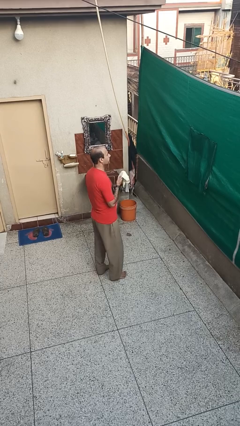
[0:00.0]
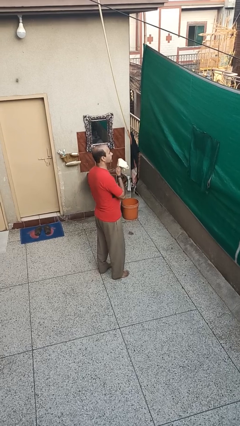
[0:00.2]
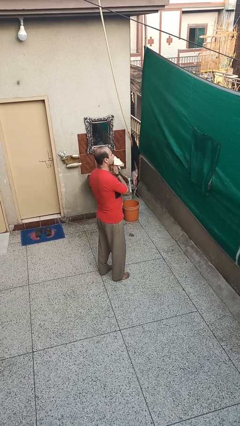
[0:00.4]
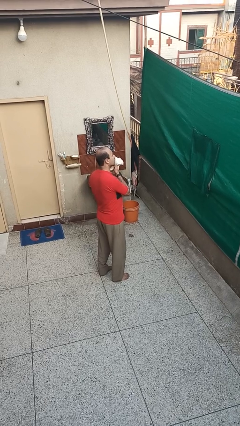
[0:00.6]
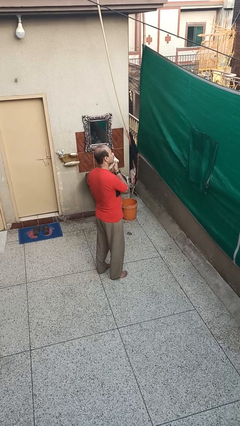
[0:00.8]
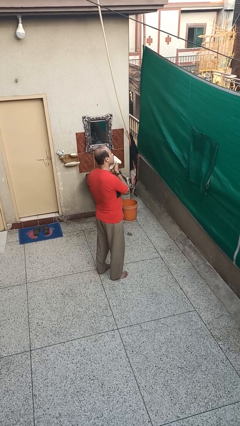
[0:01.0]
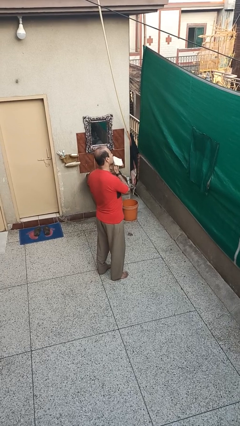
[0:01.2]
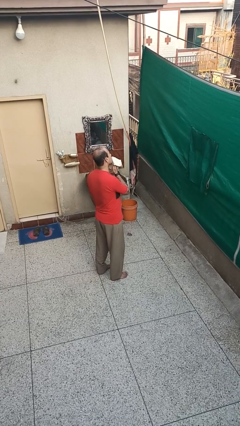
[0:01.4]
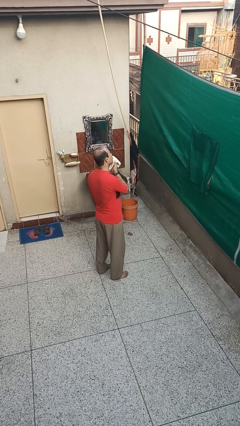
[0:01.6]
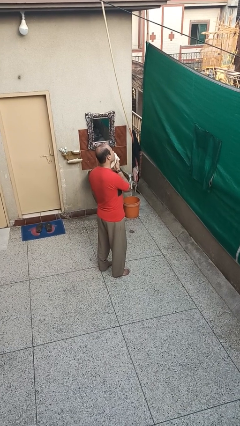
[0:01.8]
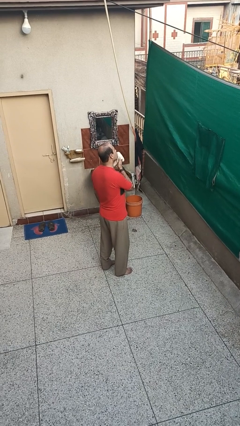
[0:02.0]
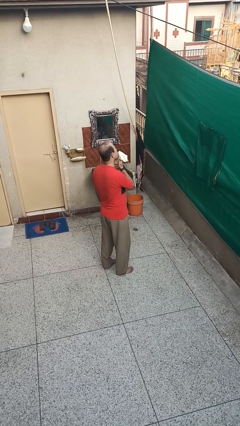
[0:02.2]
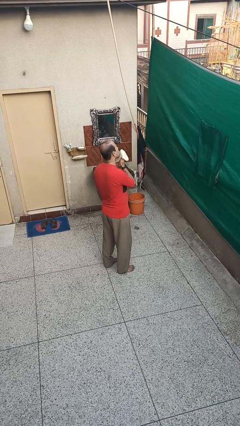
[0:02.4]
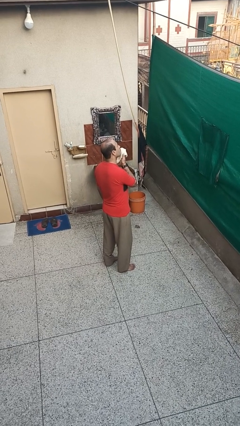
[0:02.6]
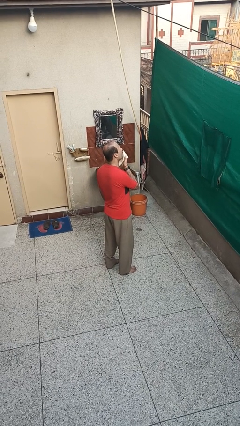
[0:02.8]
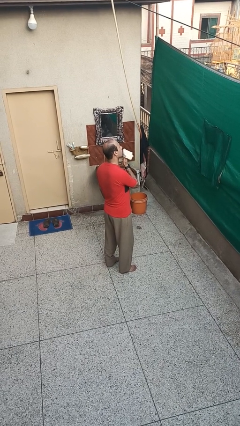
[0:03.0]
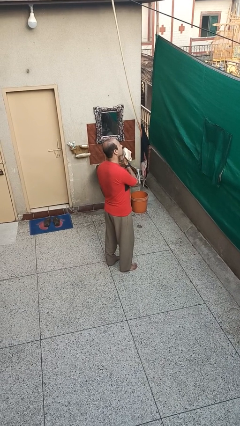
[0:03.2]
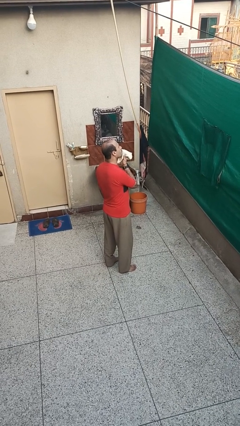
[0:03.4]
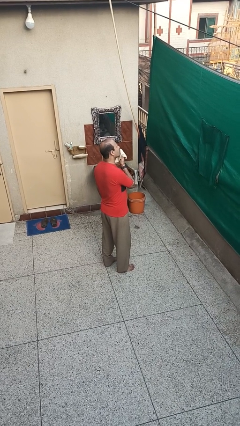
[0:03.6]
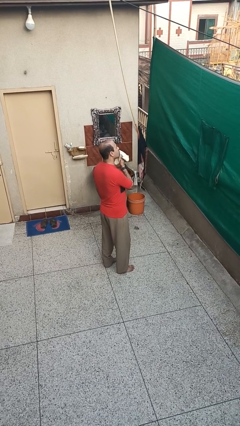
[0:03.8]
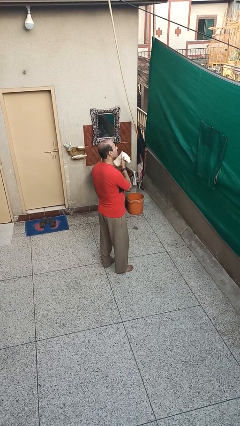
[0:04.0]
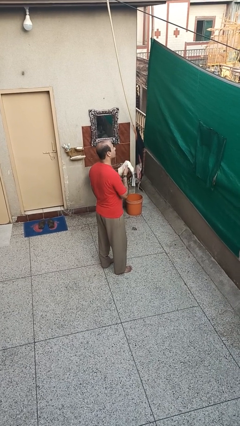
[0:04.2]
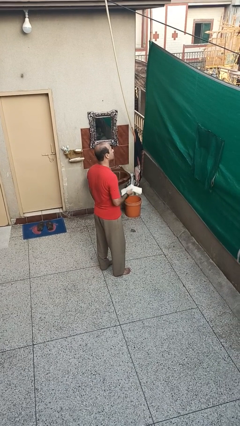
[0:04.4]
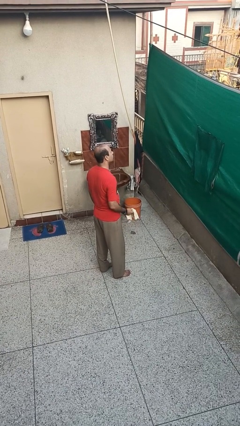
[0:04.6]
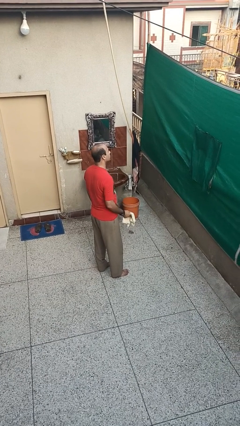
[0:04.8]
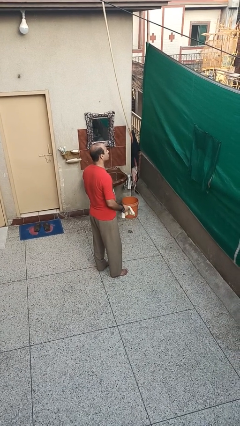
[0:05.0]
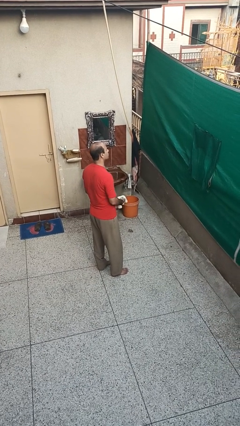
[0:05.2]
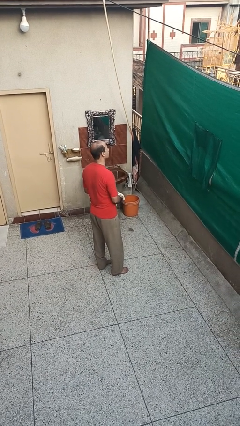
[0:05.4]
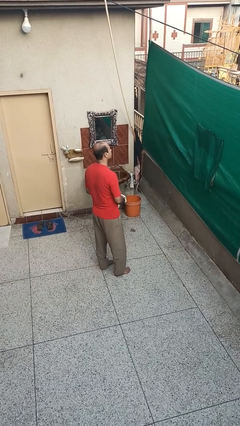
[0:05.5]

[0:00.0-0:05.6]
person wipes mouth with napkin

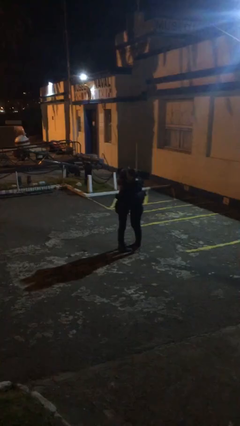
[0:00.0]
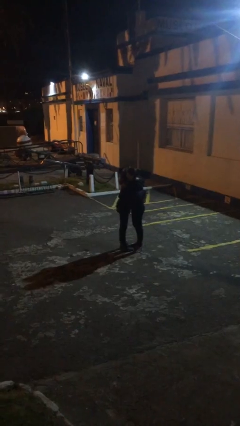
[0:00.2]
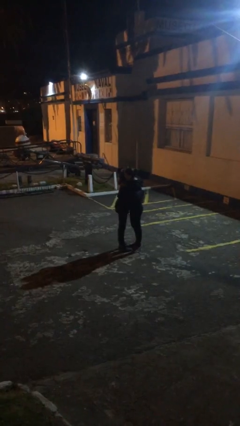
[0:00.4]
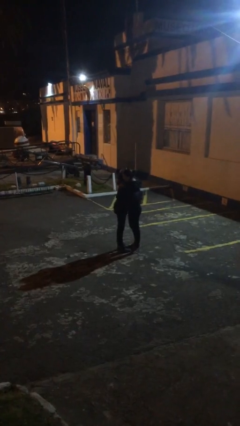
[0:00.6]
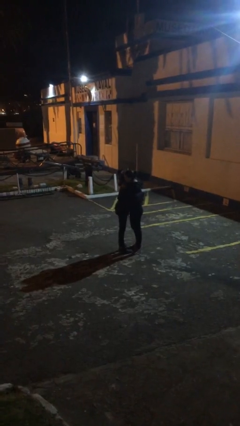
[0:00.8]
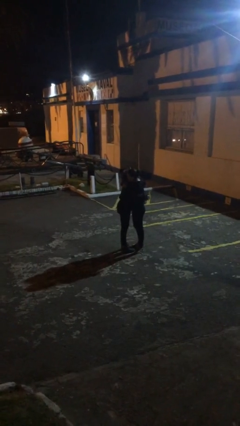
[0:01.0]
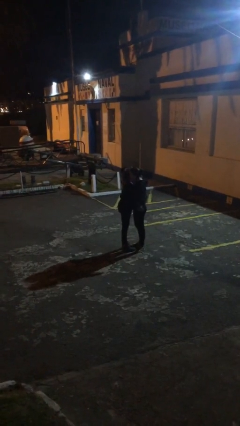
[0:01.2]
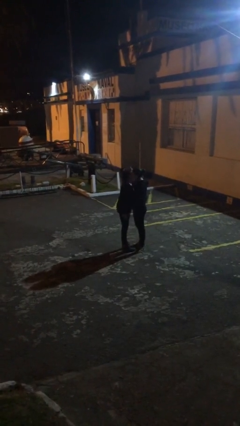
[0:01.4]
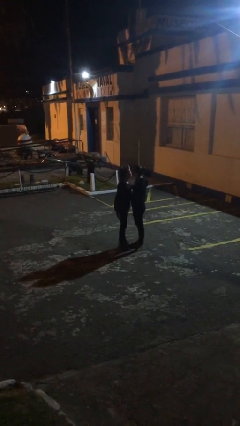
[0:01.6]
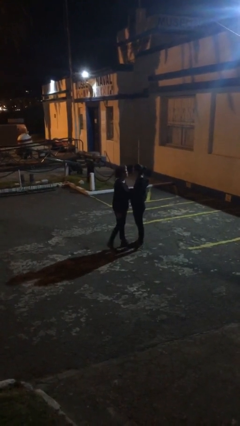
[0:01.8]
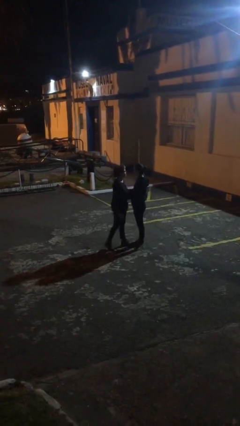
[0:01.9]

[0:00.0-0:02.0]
person embraces person

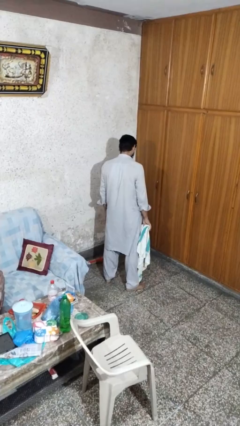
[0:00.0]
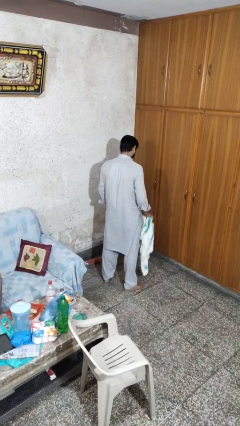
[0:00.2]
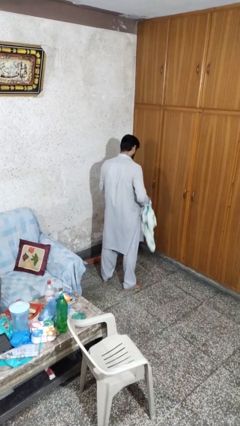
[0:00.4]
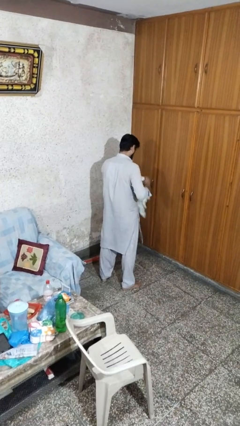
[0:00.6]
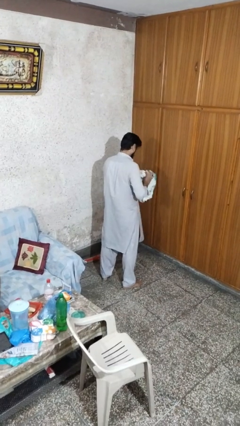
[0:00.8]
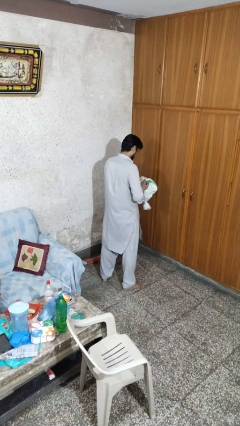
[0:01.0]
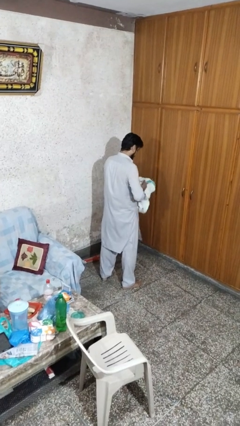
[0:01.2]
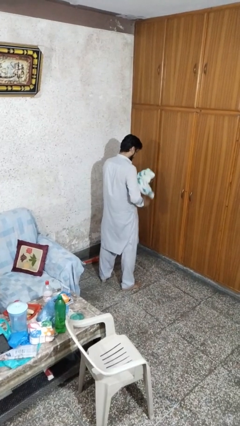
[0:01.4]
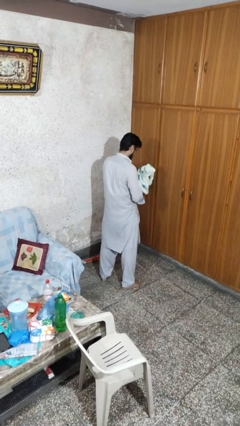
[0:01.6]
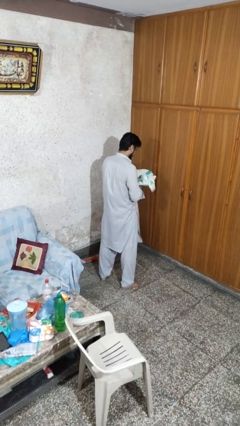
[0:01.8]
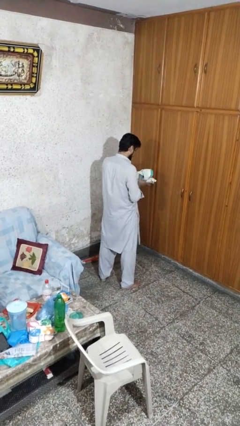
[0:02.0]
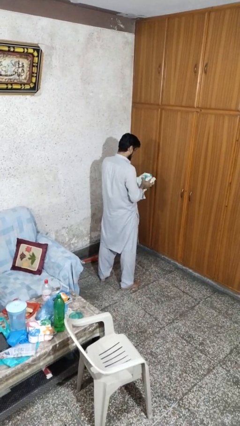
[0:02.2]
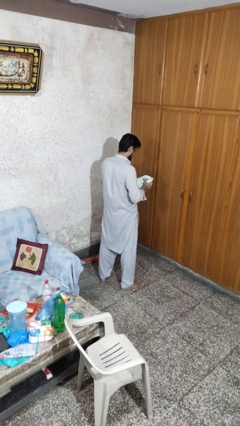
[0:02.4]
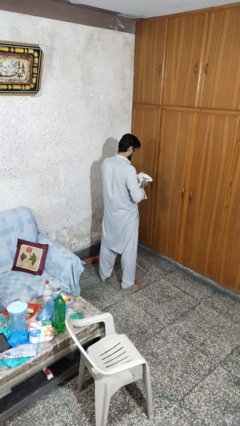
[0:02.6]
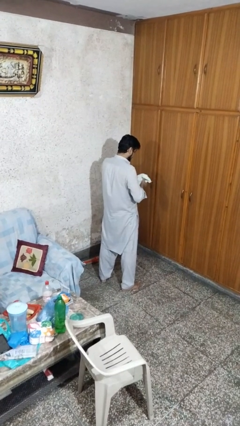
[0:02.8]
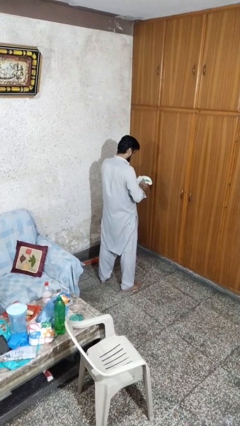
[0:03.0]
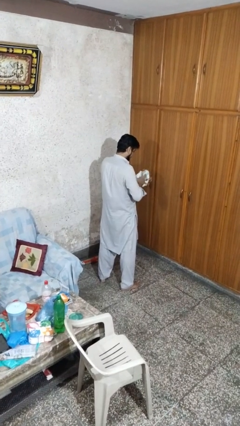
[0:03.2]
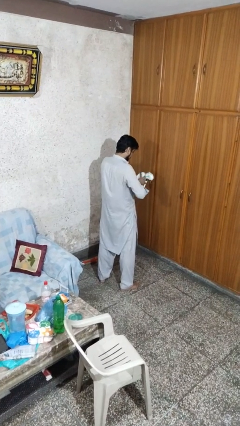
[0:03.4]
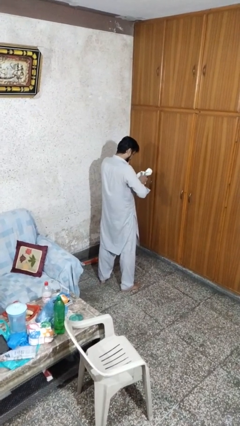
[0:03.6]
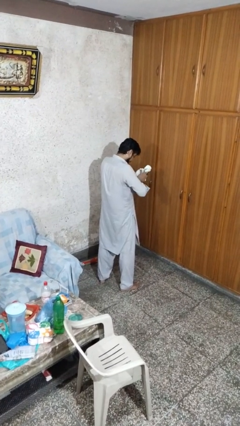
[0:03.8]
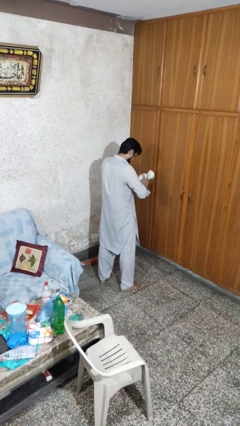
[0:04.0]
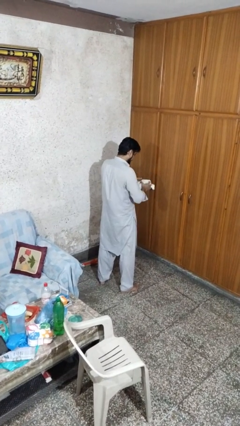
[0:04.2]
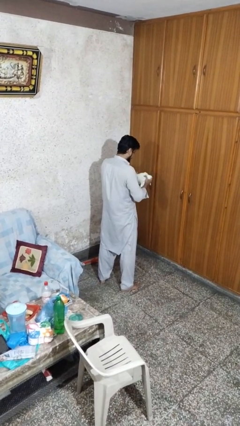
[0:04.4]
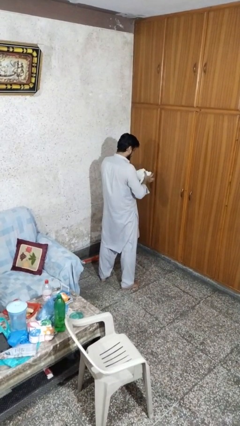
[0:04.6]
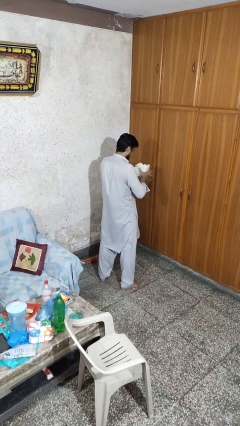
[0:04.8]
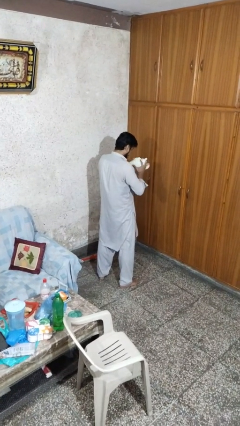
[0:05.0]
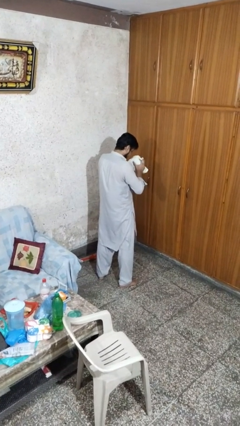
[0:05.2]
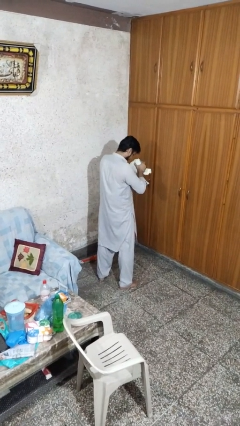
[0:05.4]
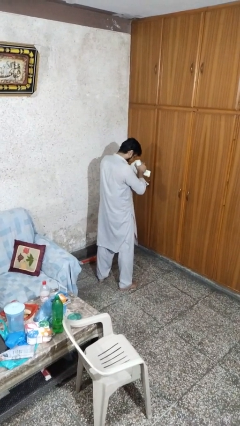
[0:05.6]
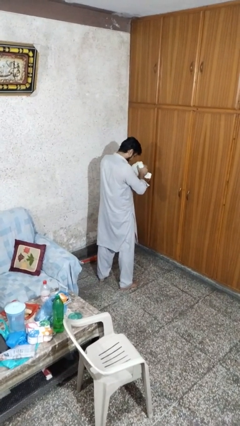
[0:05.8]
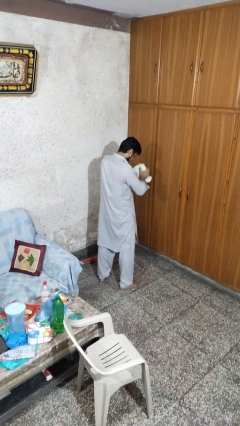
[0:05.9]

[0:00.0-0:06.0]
person squeezes object

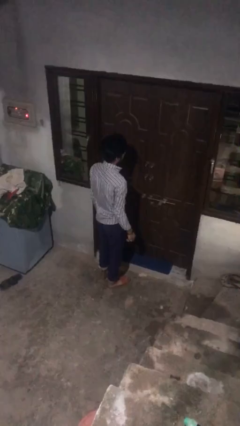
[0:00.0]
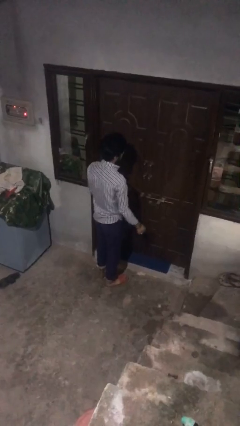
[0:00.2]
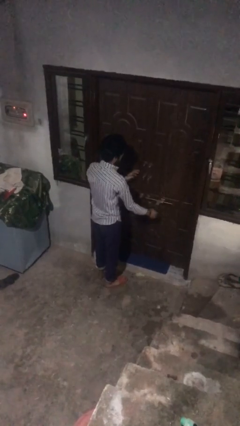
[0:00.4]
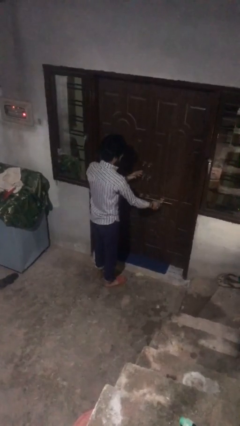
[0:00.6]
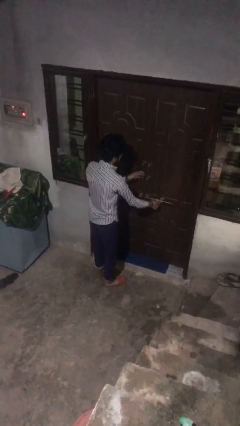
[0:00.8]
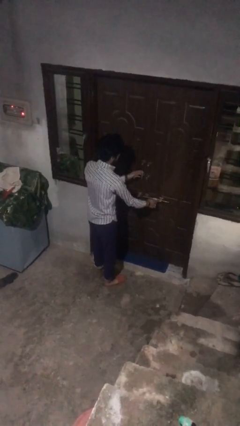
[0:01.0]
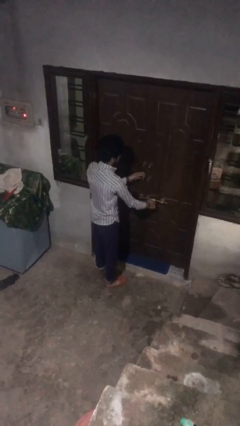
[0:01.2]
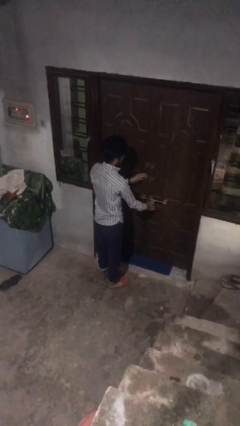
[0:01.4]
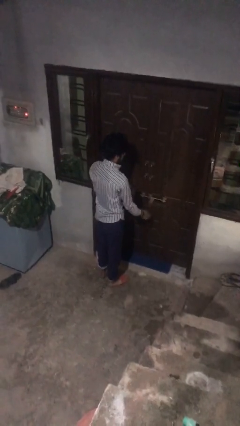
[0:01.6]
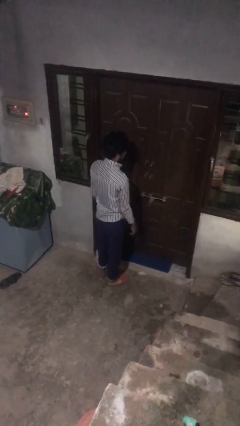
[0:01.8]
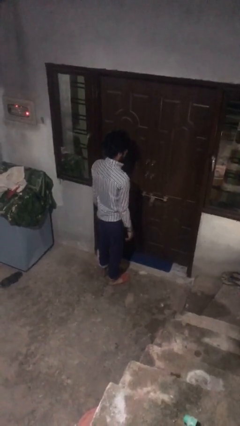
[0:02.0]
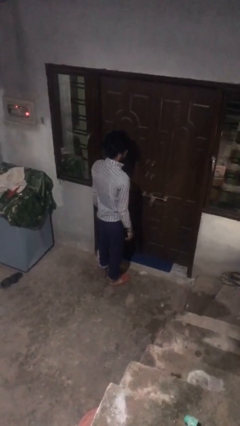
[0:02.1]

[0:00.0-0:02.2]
person locks door with keys

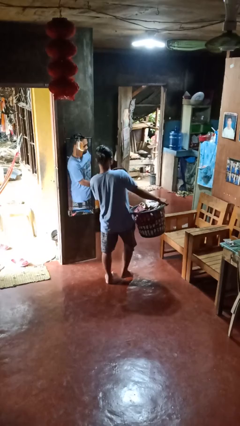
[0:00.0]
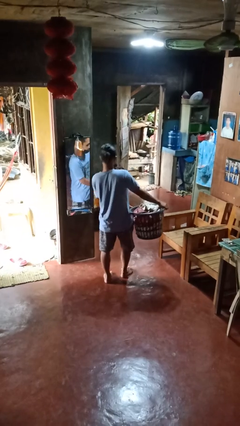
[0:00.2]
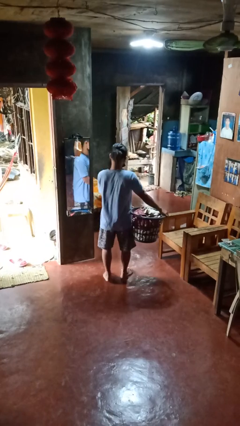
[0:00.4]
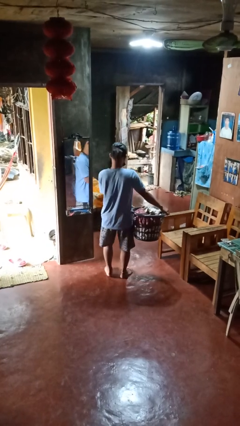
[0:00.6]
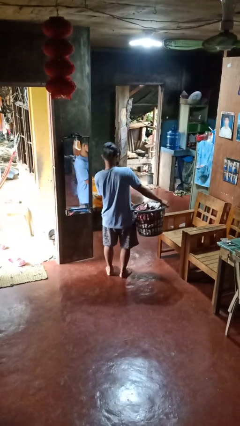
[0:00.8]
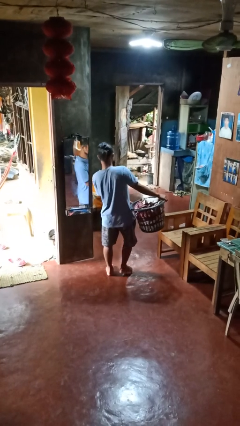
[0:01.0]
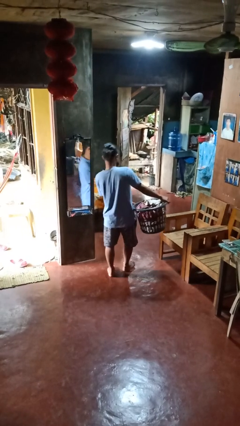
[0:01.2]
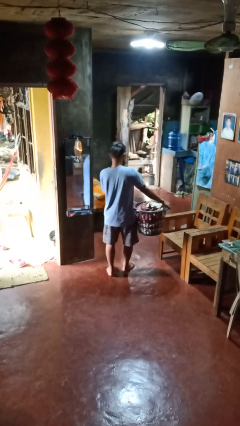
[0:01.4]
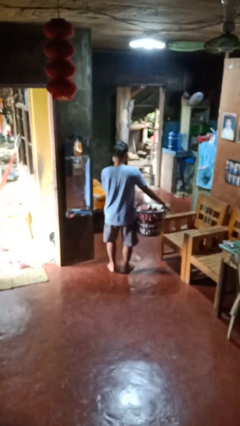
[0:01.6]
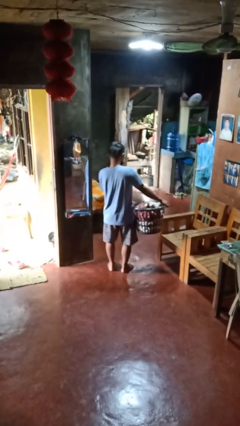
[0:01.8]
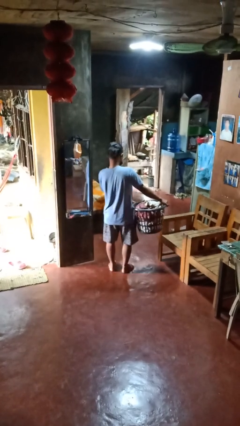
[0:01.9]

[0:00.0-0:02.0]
person carries laundry basket
